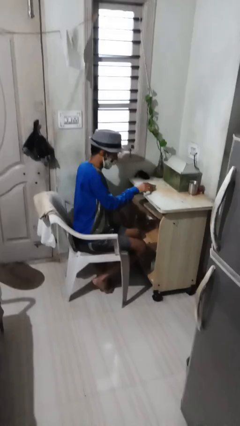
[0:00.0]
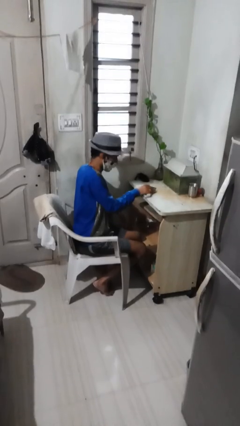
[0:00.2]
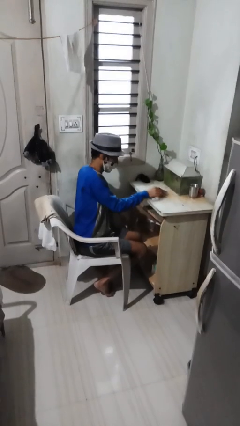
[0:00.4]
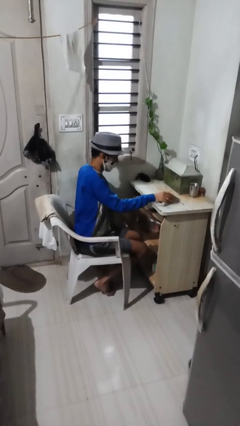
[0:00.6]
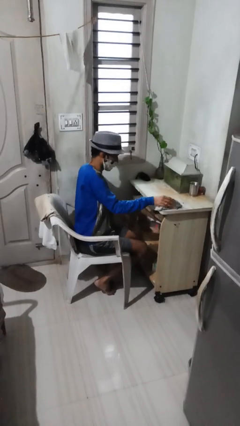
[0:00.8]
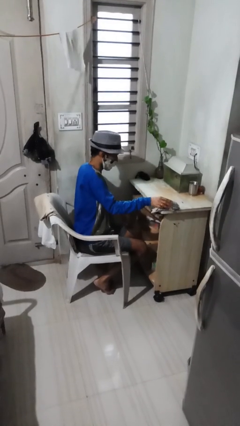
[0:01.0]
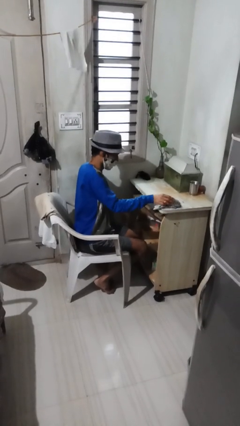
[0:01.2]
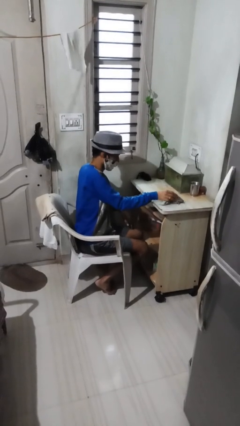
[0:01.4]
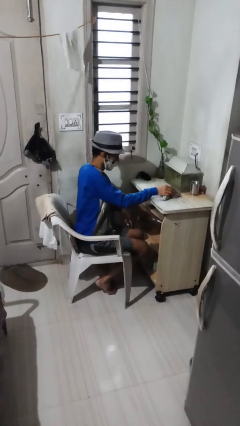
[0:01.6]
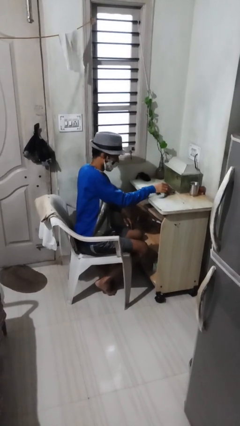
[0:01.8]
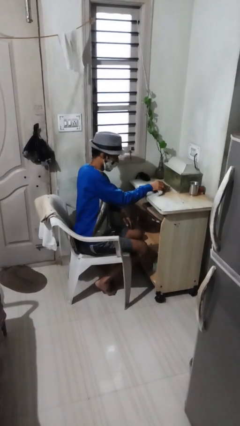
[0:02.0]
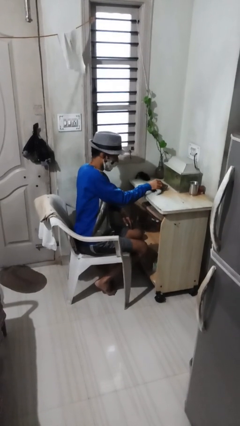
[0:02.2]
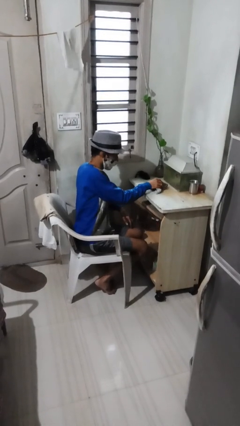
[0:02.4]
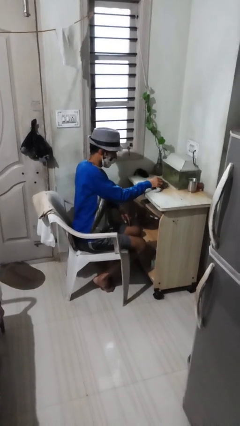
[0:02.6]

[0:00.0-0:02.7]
person cleans table with rag

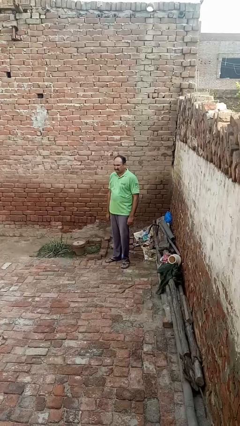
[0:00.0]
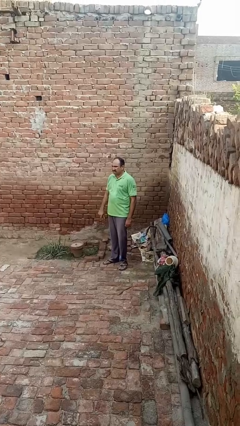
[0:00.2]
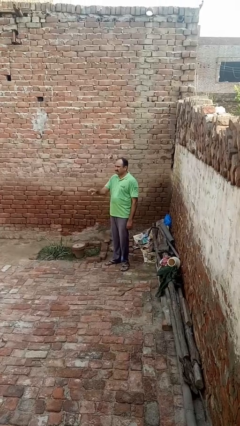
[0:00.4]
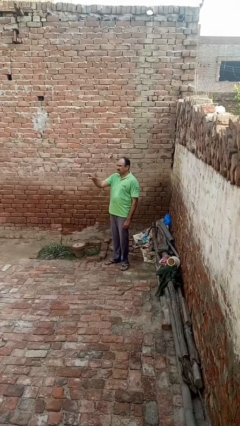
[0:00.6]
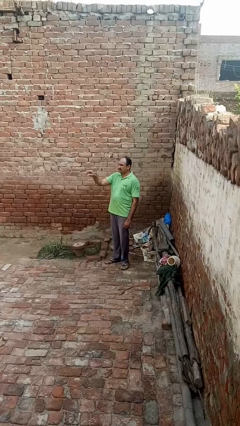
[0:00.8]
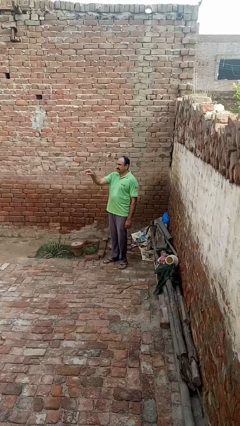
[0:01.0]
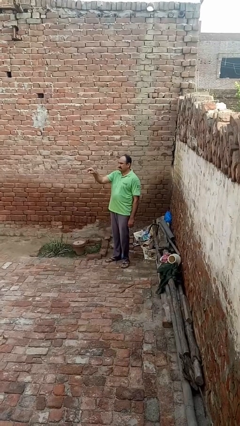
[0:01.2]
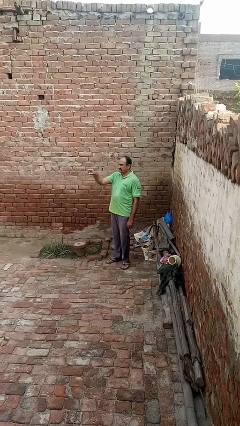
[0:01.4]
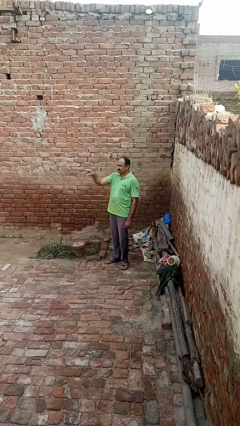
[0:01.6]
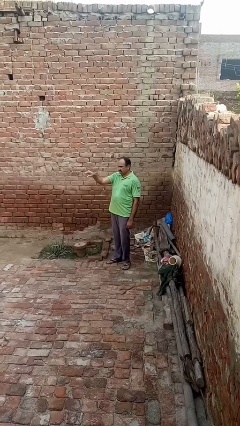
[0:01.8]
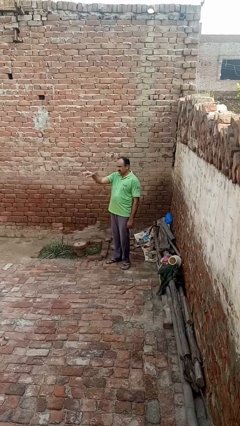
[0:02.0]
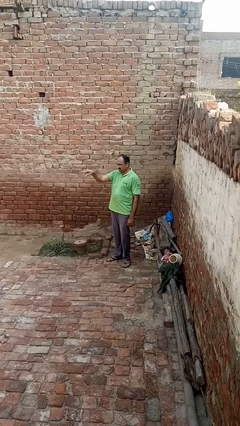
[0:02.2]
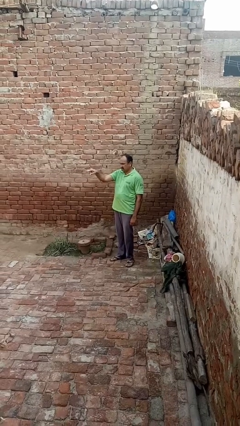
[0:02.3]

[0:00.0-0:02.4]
person points at person

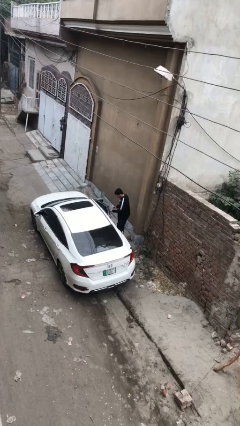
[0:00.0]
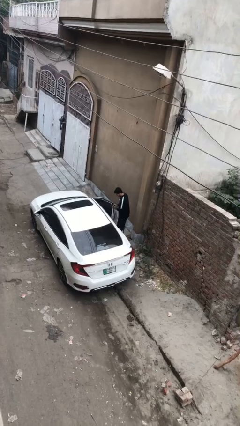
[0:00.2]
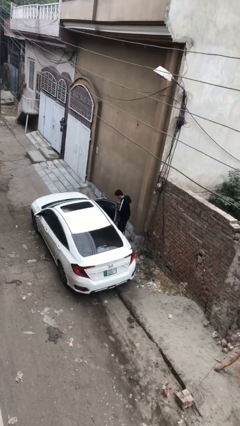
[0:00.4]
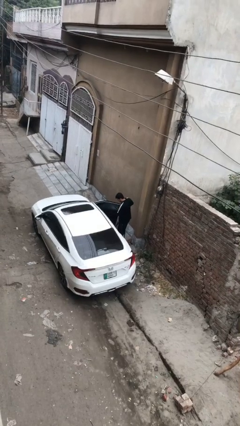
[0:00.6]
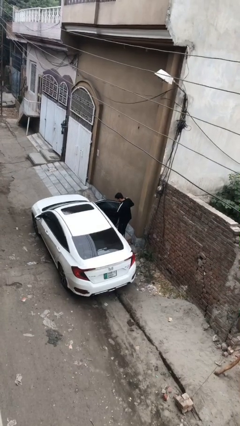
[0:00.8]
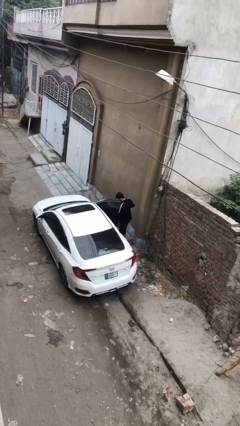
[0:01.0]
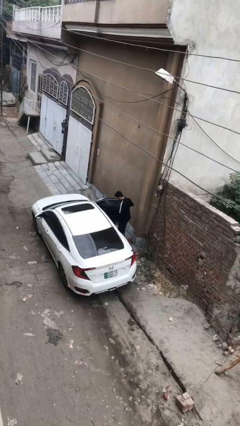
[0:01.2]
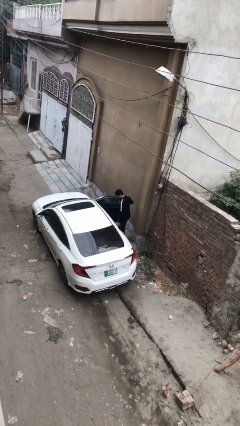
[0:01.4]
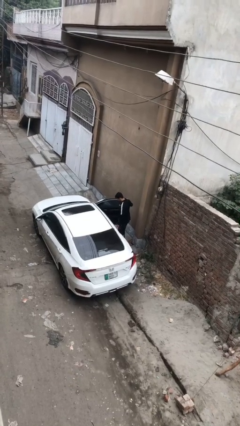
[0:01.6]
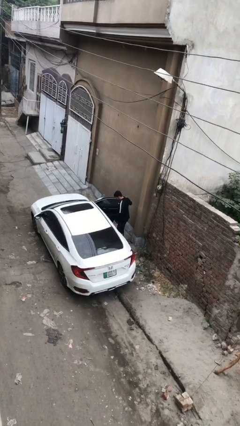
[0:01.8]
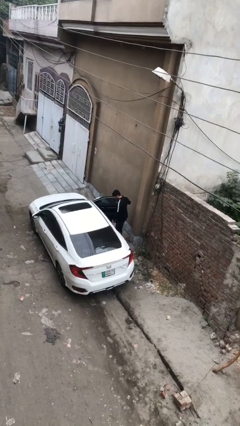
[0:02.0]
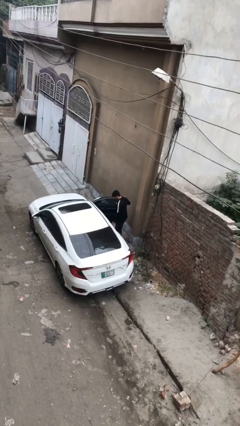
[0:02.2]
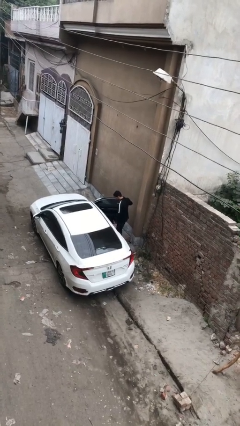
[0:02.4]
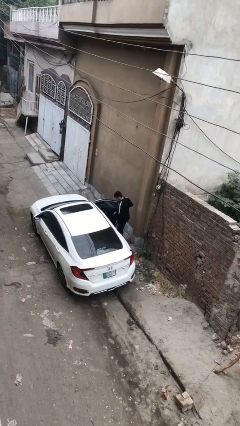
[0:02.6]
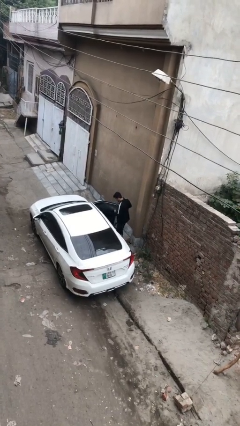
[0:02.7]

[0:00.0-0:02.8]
person opens car door

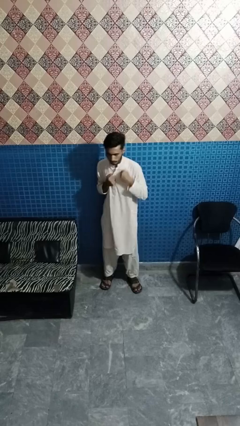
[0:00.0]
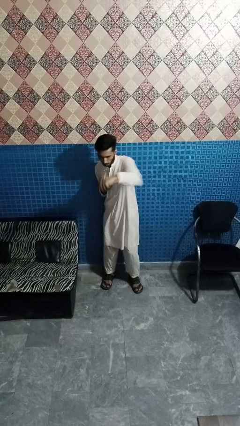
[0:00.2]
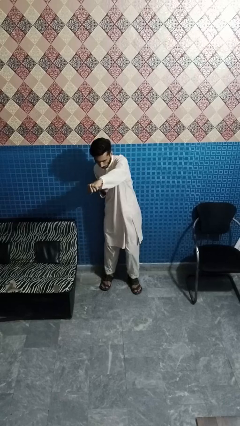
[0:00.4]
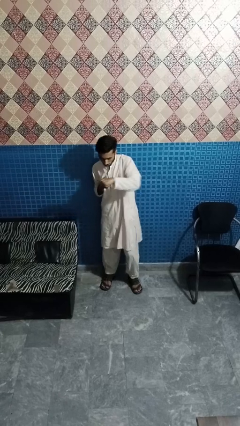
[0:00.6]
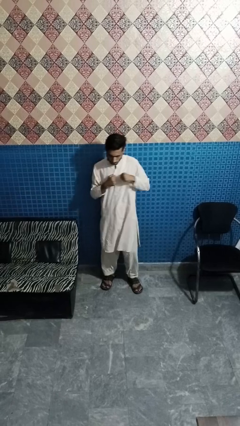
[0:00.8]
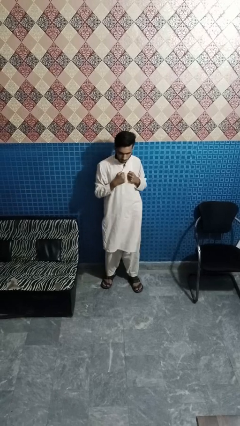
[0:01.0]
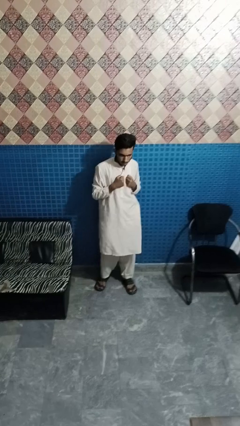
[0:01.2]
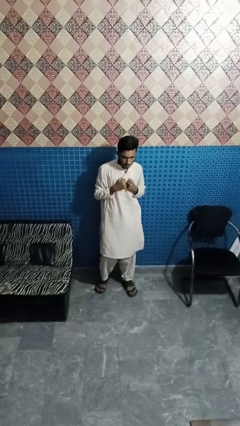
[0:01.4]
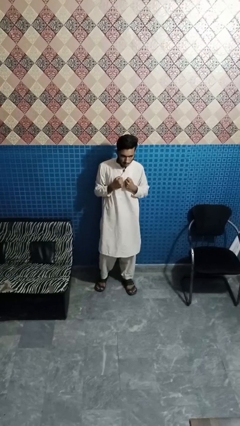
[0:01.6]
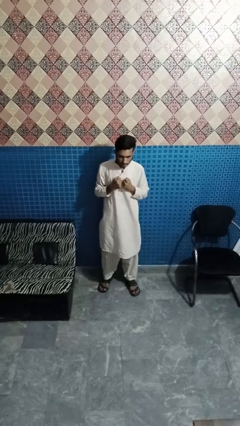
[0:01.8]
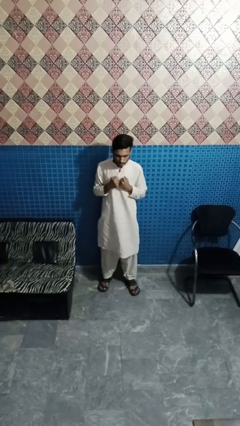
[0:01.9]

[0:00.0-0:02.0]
person punches

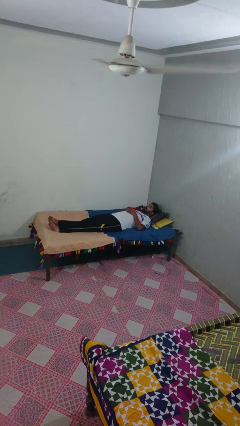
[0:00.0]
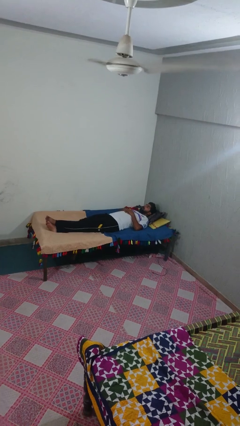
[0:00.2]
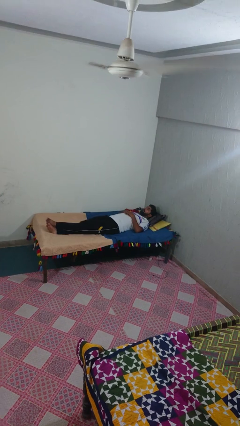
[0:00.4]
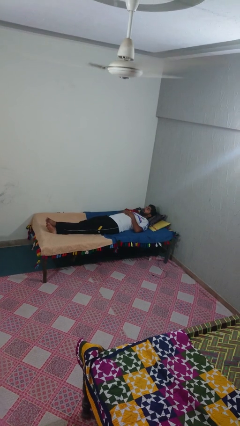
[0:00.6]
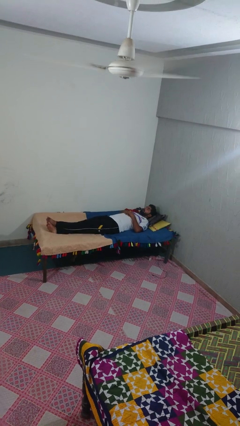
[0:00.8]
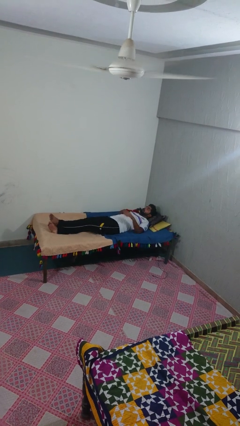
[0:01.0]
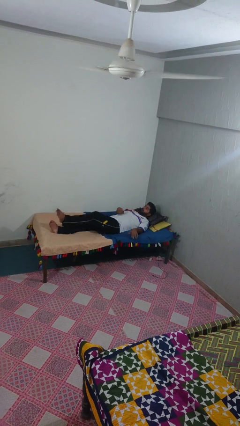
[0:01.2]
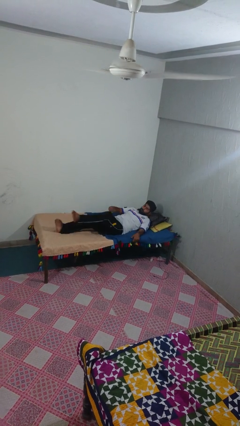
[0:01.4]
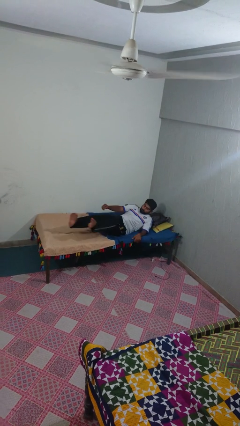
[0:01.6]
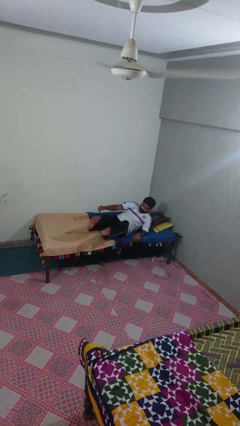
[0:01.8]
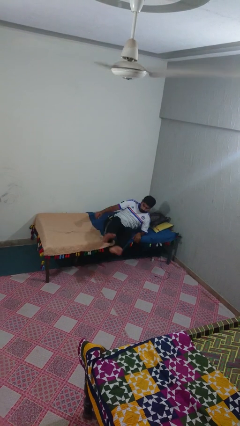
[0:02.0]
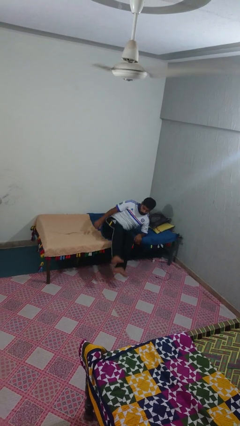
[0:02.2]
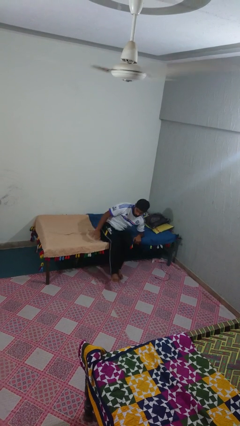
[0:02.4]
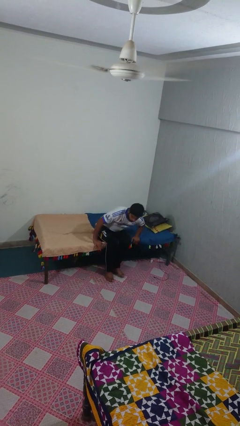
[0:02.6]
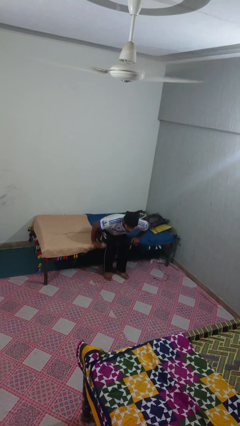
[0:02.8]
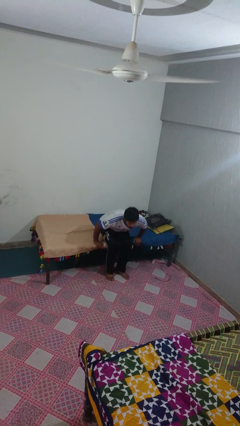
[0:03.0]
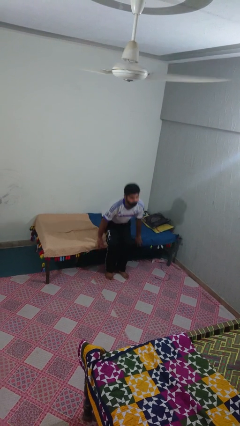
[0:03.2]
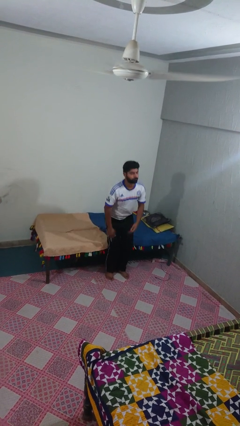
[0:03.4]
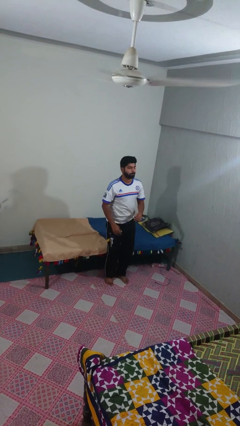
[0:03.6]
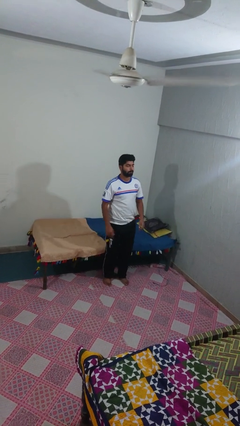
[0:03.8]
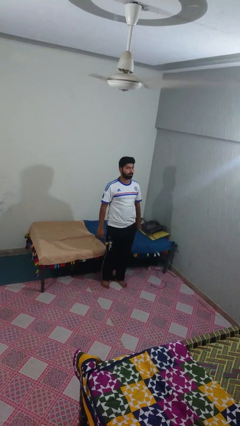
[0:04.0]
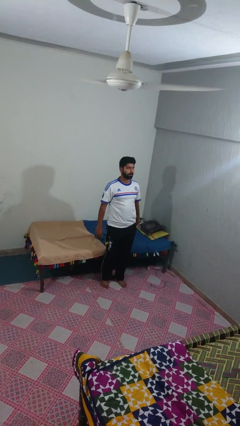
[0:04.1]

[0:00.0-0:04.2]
person stands up

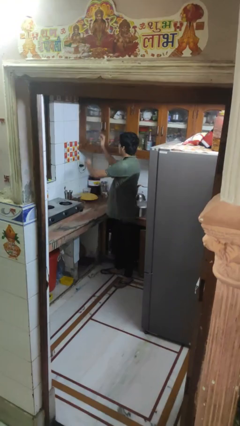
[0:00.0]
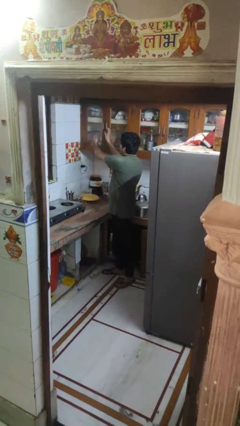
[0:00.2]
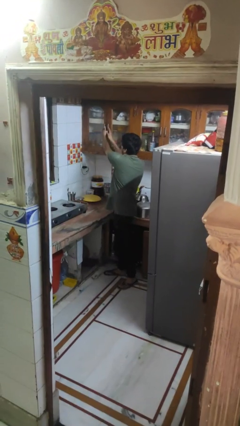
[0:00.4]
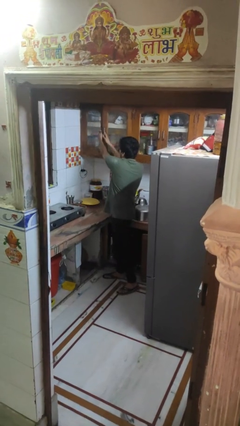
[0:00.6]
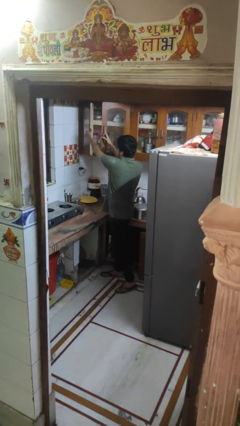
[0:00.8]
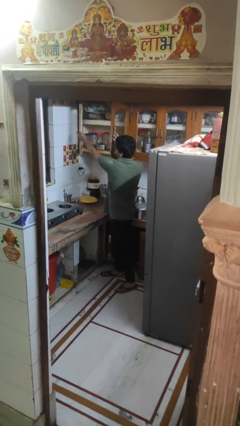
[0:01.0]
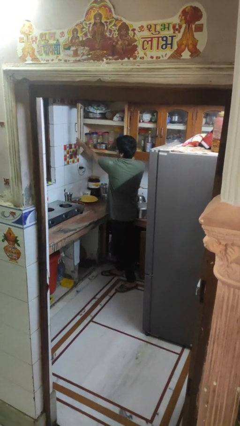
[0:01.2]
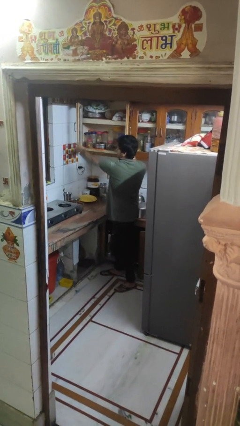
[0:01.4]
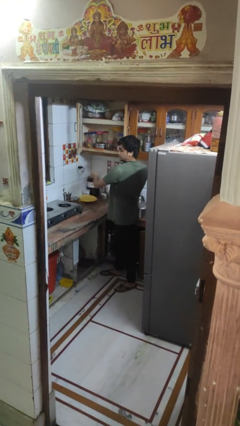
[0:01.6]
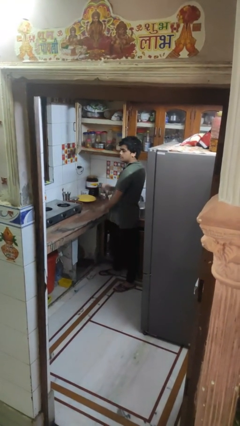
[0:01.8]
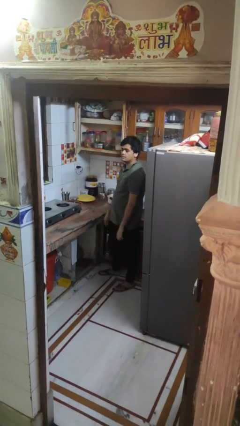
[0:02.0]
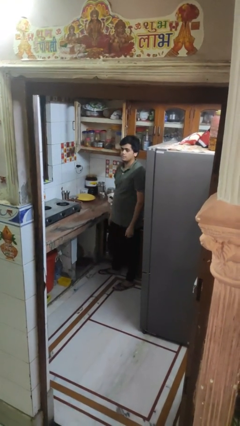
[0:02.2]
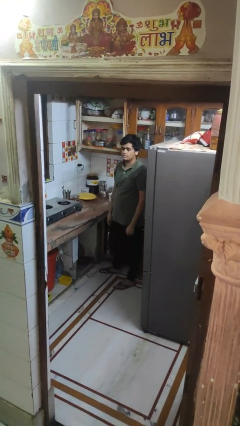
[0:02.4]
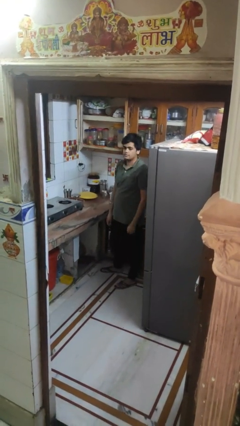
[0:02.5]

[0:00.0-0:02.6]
person opens cabinet

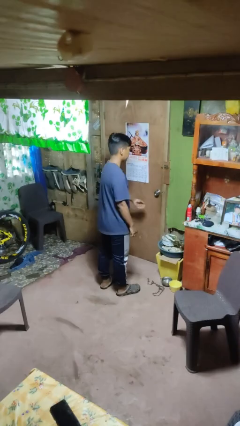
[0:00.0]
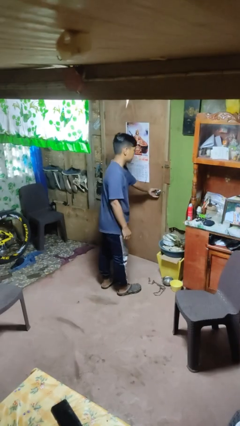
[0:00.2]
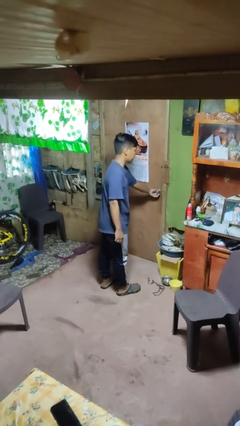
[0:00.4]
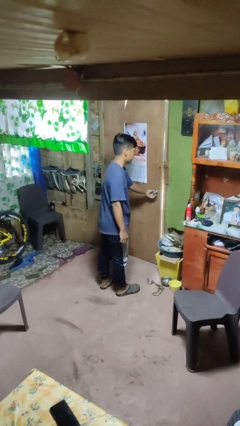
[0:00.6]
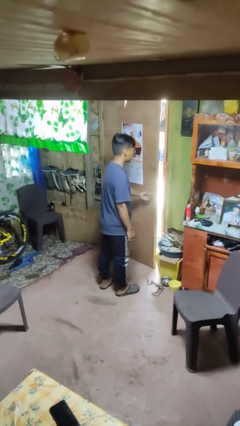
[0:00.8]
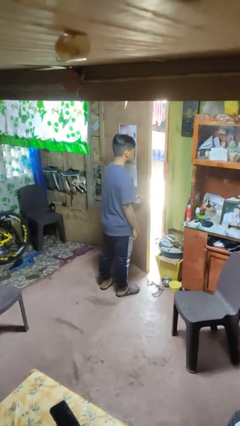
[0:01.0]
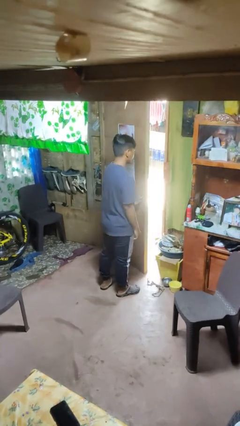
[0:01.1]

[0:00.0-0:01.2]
person opens facility door
